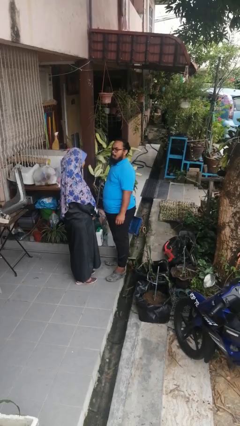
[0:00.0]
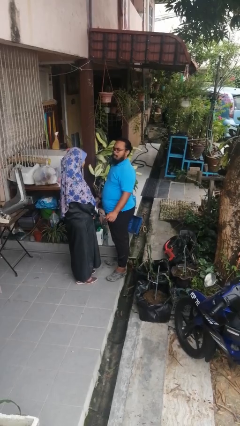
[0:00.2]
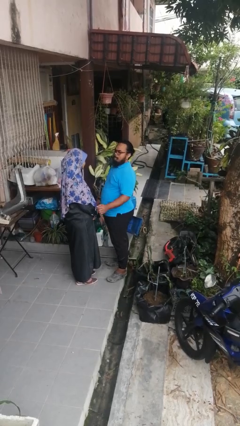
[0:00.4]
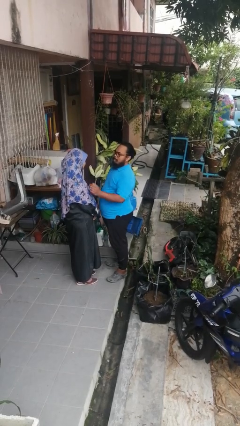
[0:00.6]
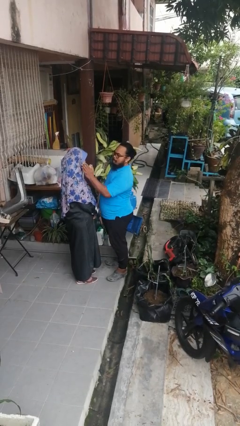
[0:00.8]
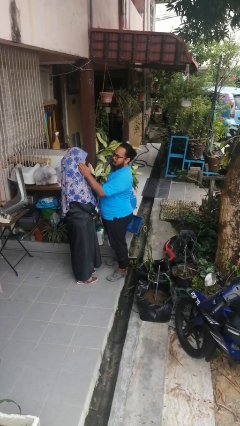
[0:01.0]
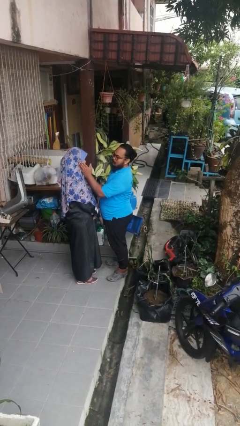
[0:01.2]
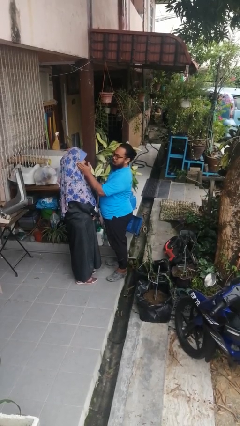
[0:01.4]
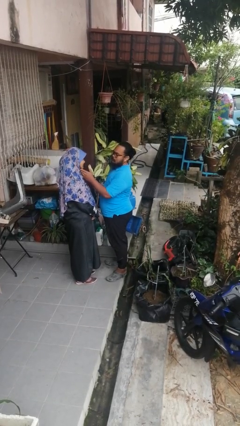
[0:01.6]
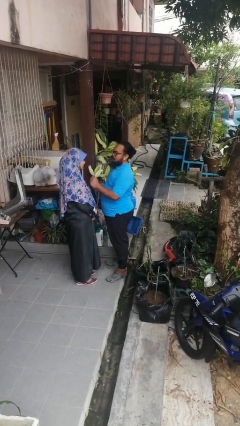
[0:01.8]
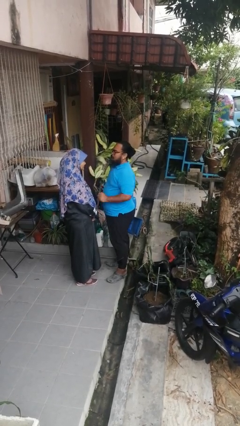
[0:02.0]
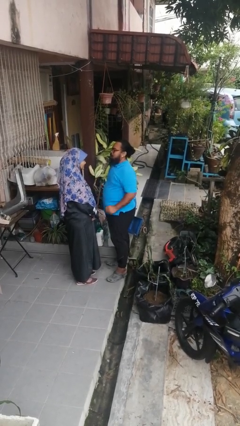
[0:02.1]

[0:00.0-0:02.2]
person touches face of person

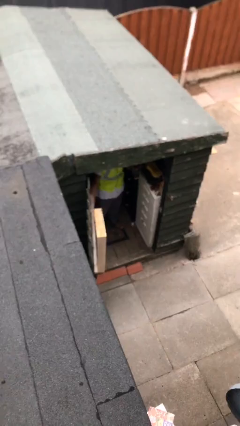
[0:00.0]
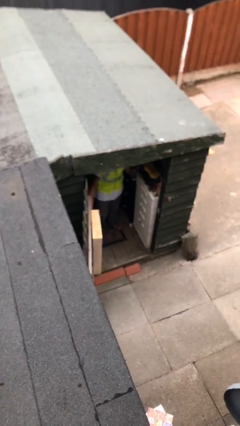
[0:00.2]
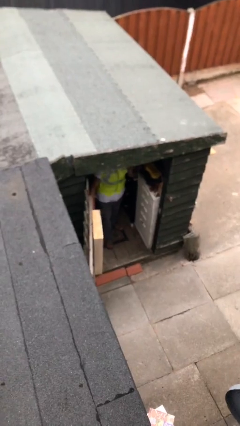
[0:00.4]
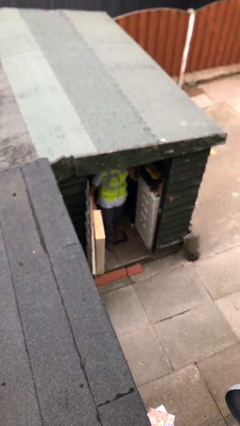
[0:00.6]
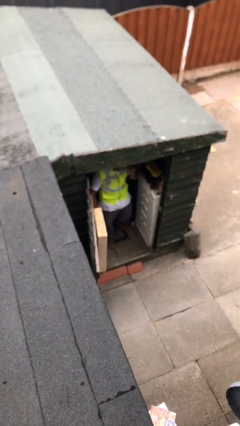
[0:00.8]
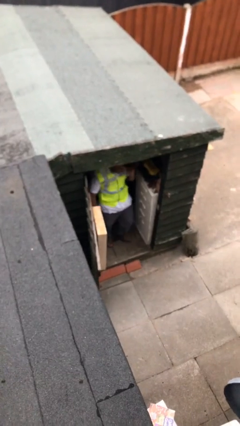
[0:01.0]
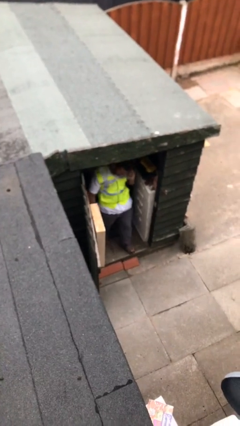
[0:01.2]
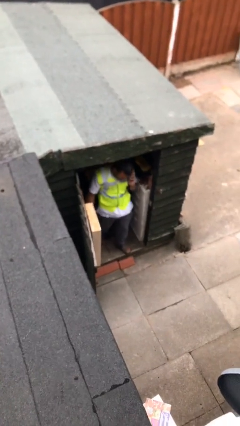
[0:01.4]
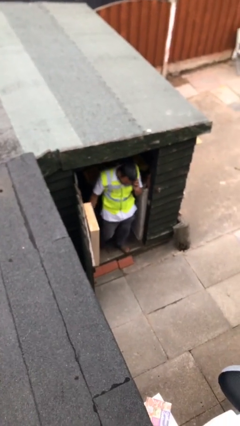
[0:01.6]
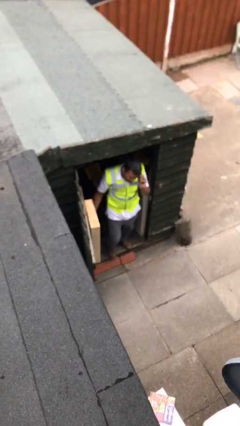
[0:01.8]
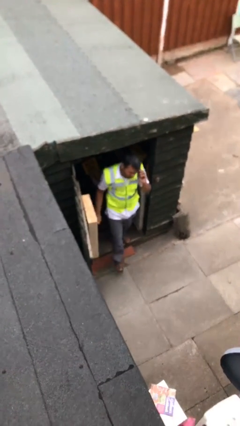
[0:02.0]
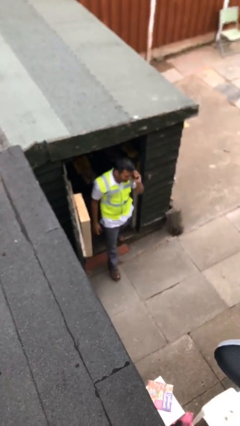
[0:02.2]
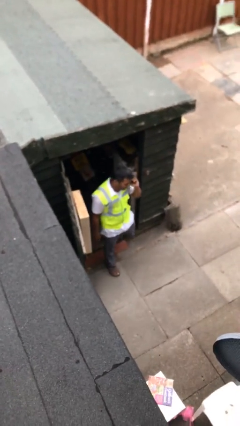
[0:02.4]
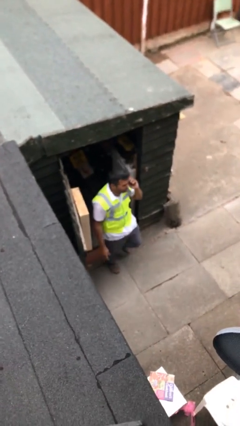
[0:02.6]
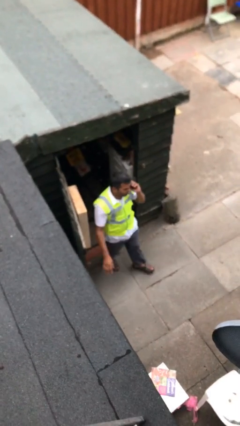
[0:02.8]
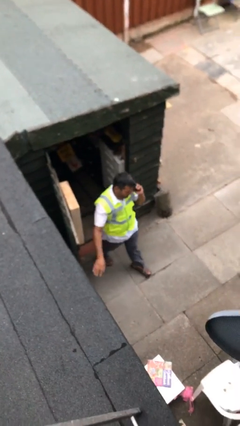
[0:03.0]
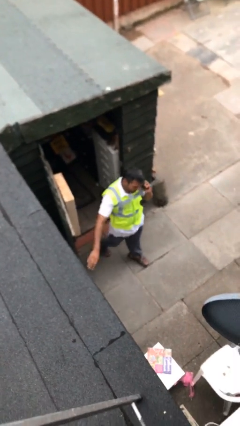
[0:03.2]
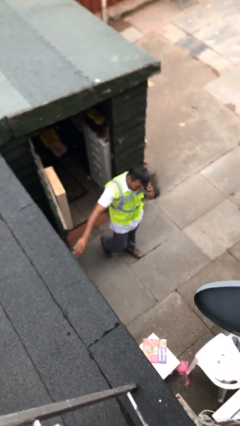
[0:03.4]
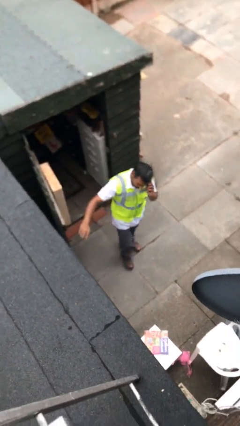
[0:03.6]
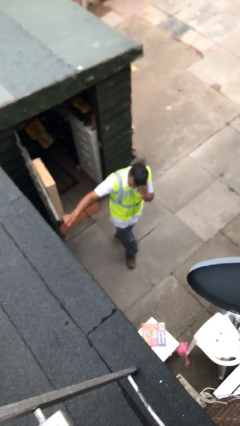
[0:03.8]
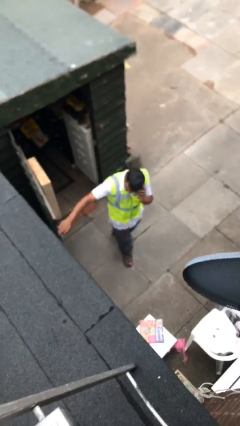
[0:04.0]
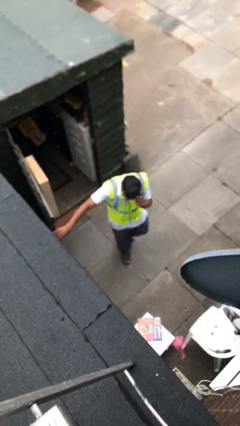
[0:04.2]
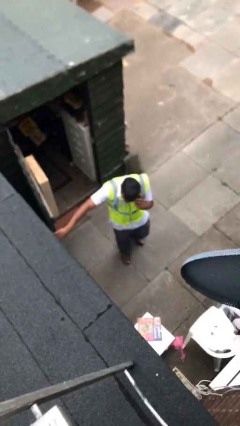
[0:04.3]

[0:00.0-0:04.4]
person enters scene through structure

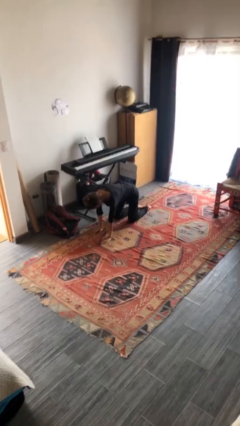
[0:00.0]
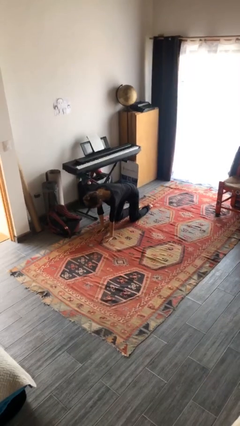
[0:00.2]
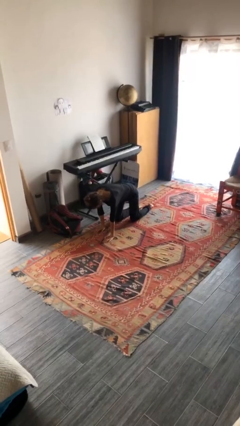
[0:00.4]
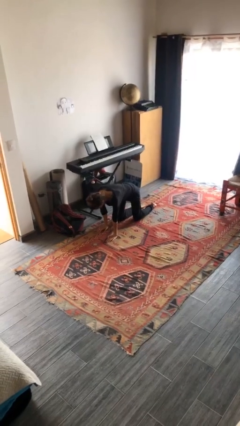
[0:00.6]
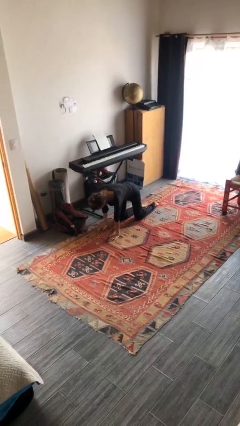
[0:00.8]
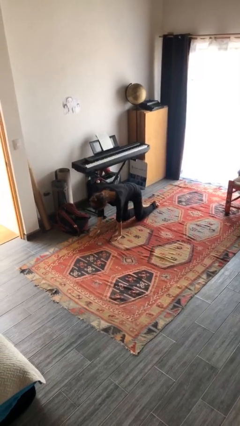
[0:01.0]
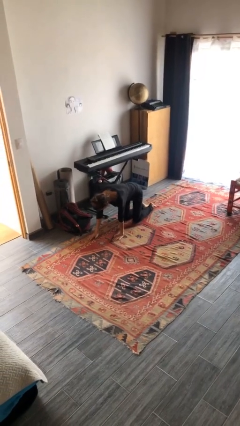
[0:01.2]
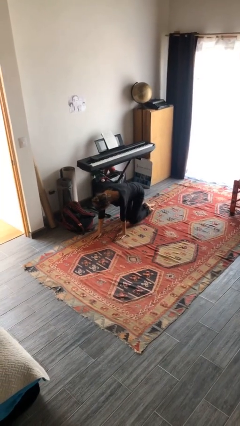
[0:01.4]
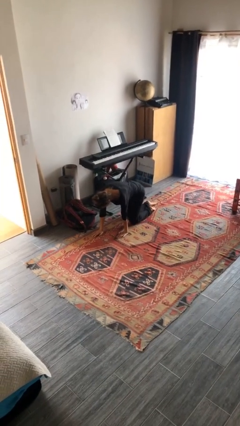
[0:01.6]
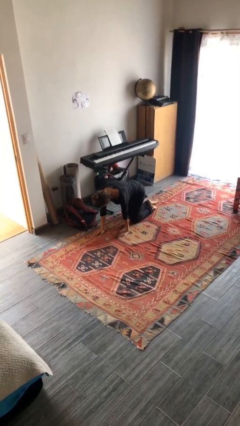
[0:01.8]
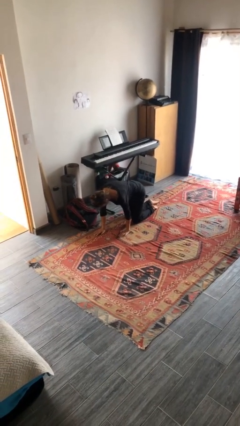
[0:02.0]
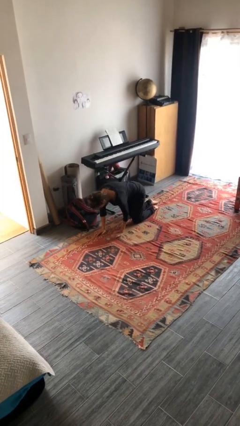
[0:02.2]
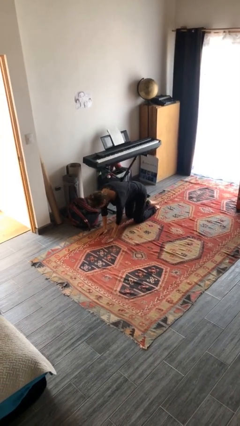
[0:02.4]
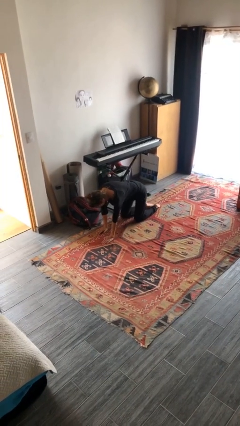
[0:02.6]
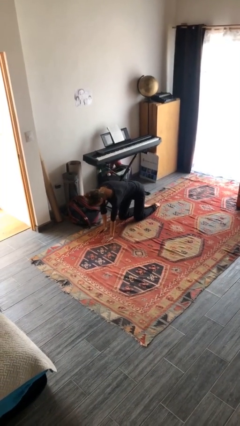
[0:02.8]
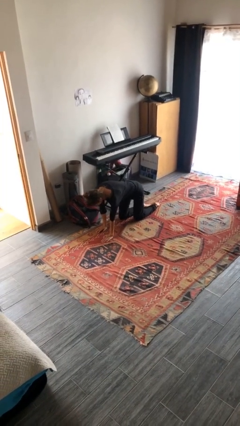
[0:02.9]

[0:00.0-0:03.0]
person crawls

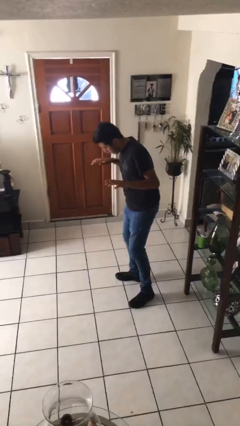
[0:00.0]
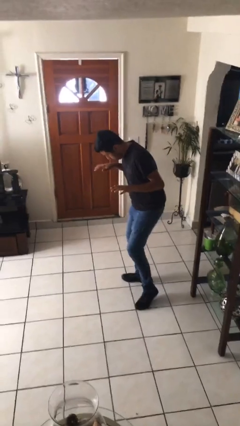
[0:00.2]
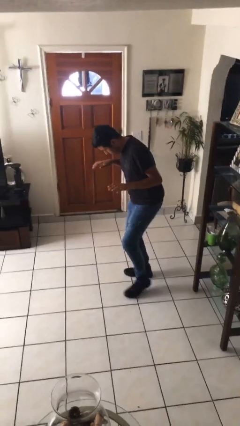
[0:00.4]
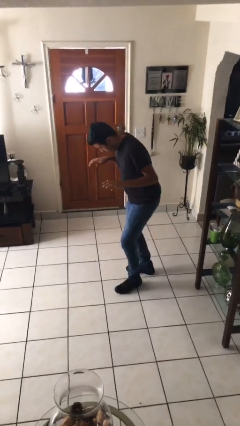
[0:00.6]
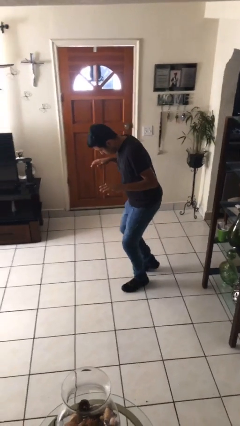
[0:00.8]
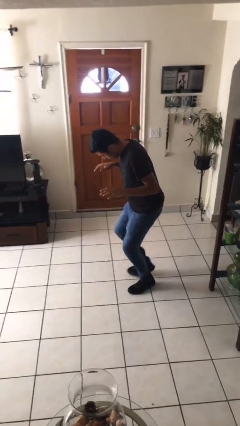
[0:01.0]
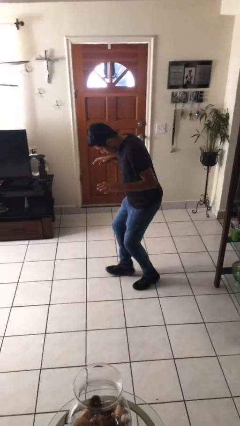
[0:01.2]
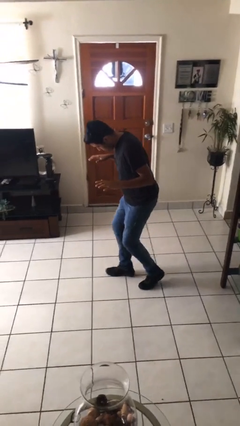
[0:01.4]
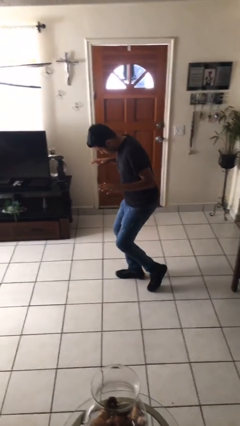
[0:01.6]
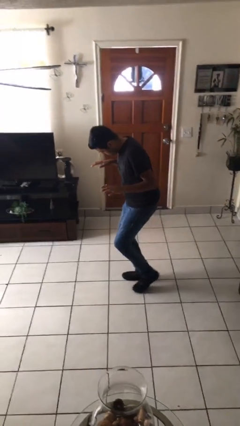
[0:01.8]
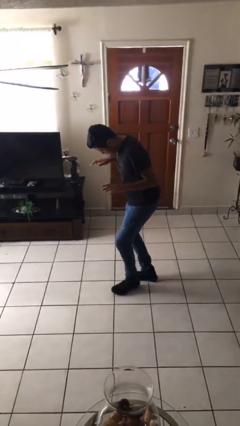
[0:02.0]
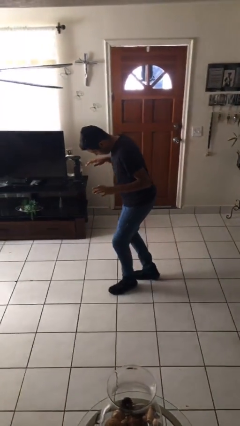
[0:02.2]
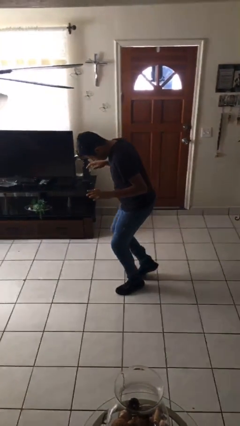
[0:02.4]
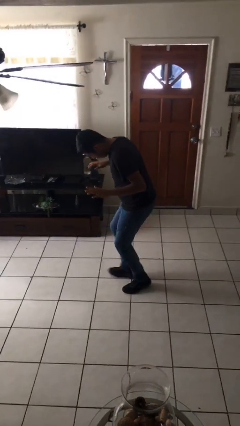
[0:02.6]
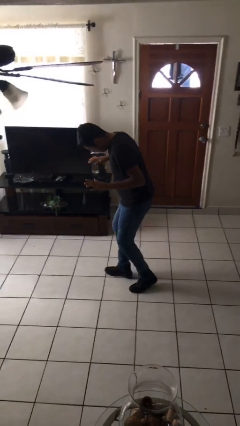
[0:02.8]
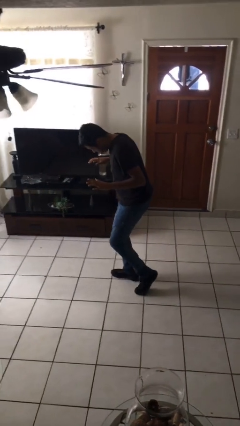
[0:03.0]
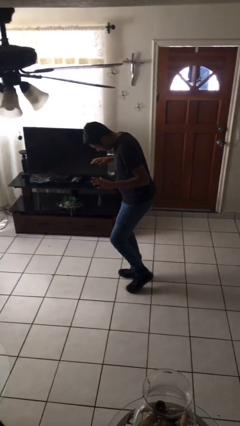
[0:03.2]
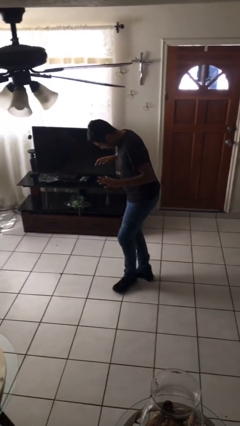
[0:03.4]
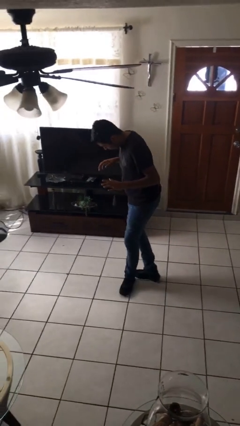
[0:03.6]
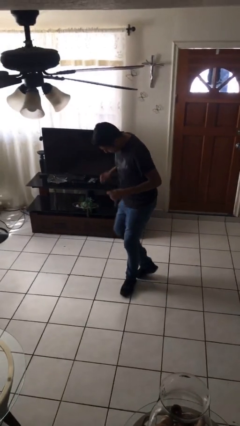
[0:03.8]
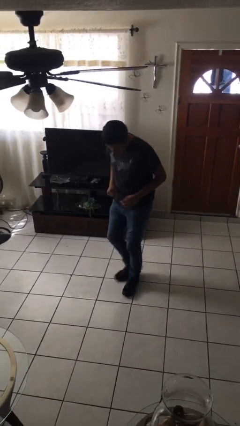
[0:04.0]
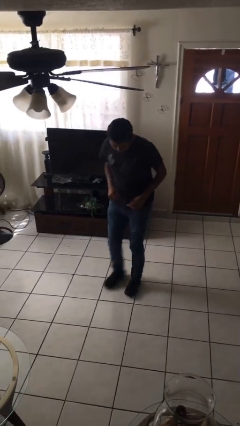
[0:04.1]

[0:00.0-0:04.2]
person walks tiptoe

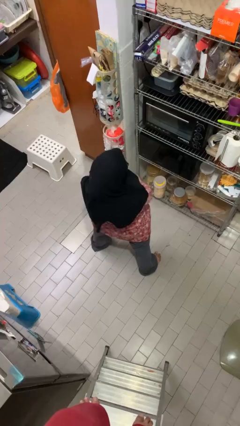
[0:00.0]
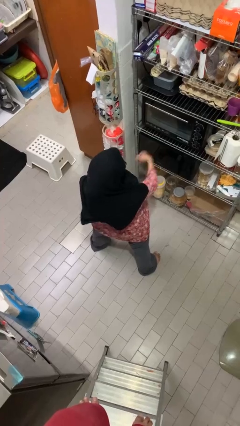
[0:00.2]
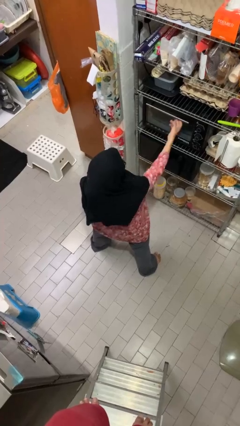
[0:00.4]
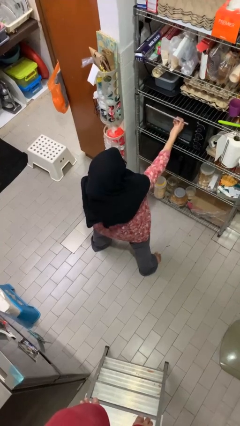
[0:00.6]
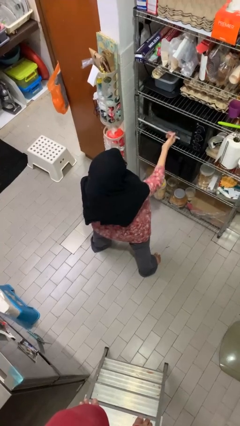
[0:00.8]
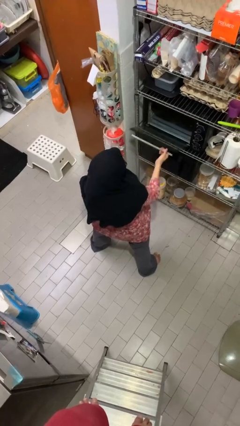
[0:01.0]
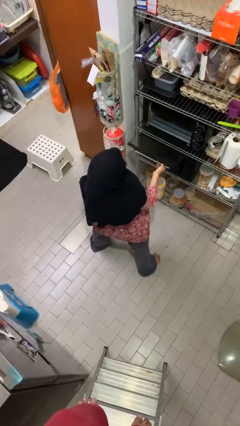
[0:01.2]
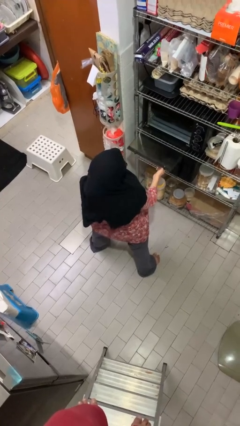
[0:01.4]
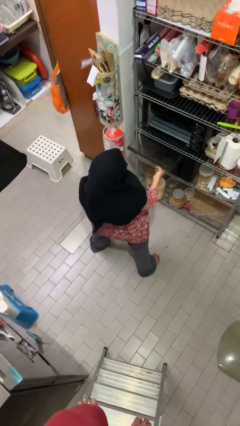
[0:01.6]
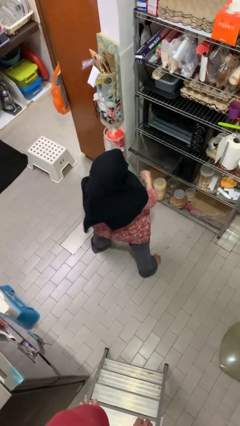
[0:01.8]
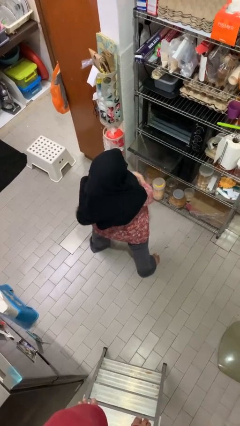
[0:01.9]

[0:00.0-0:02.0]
person opens oven door

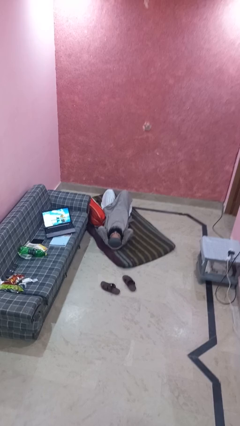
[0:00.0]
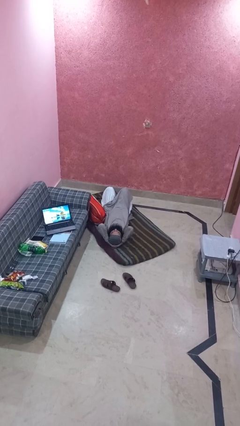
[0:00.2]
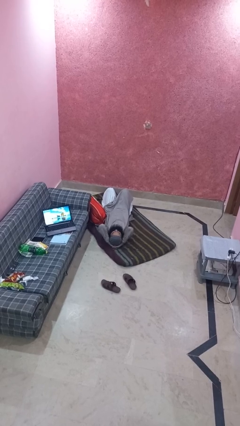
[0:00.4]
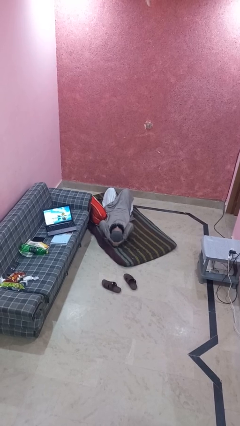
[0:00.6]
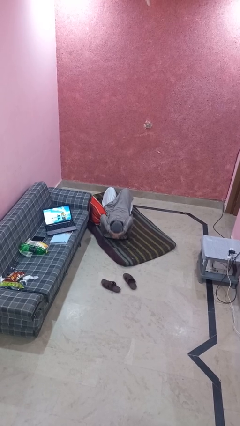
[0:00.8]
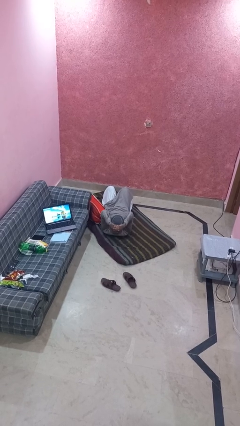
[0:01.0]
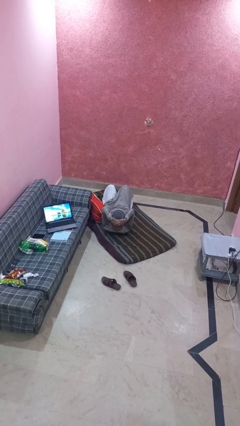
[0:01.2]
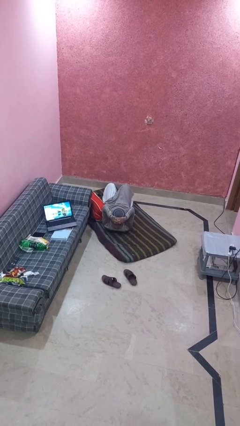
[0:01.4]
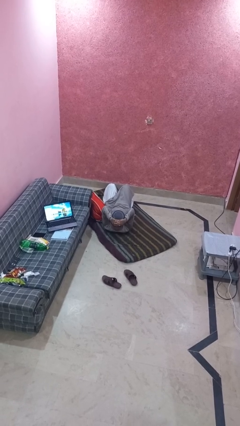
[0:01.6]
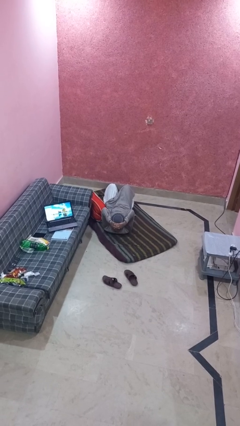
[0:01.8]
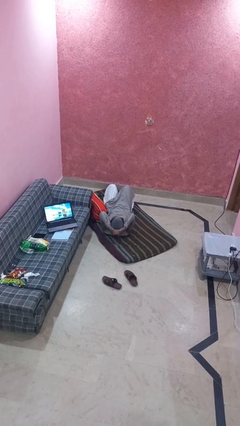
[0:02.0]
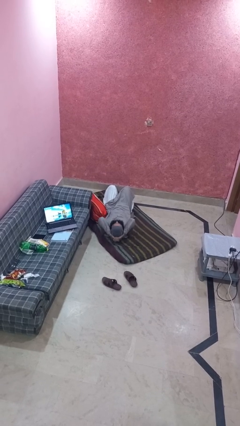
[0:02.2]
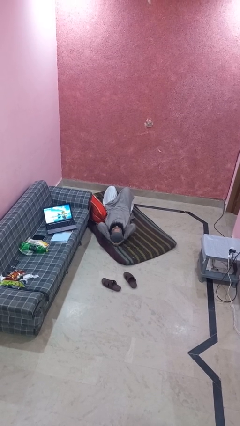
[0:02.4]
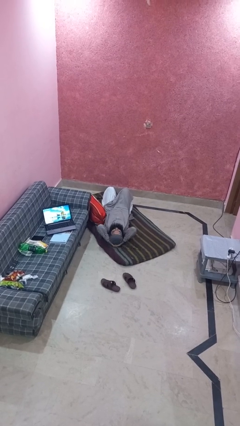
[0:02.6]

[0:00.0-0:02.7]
person exercises with situp
